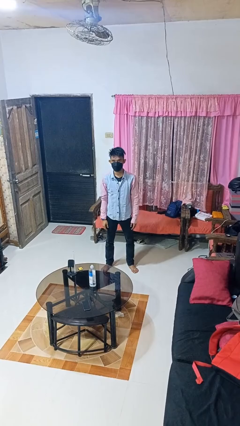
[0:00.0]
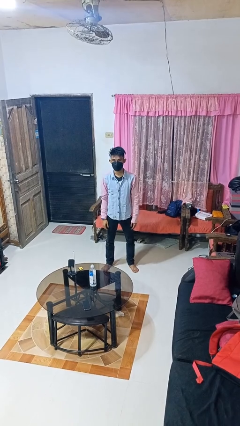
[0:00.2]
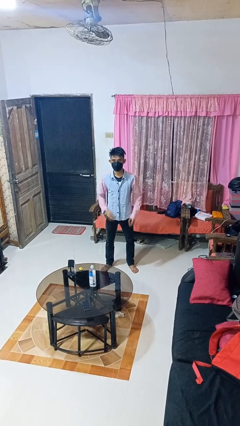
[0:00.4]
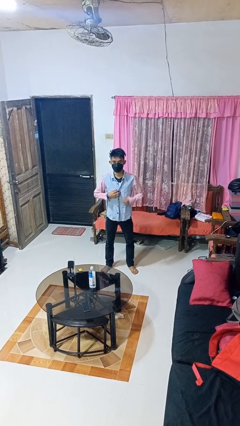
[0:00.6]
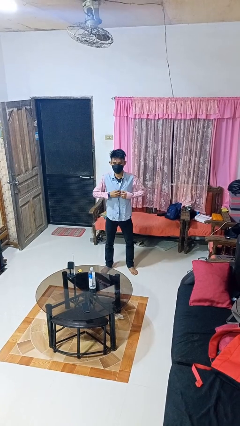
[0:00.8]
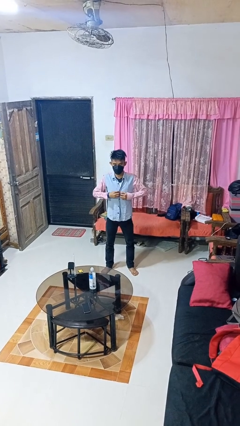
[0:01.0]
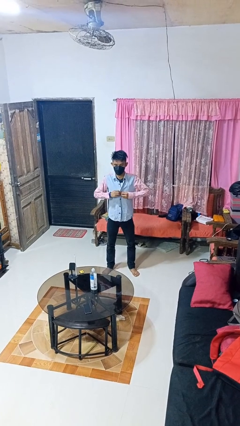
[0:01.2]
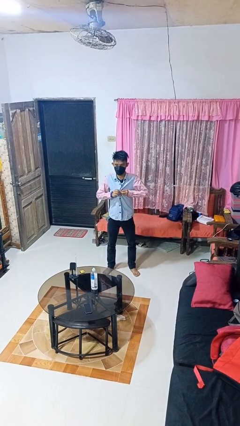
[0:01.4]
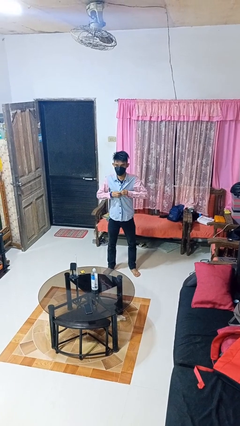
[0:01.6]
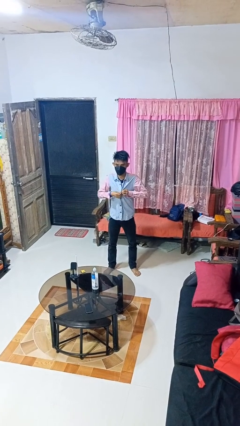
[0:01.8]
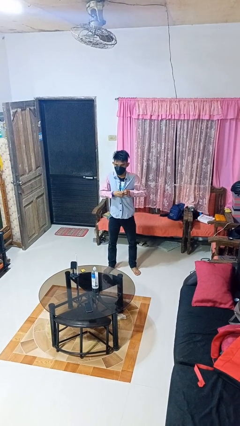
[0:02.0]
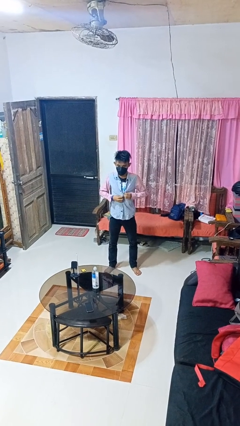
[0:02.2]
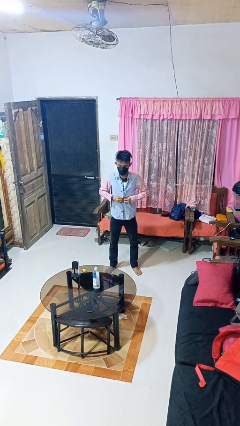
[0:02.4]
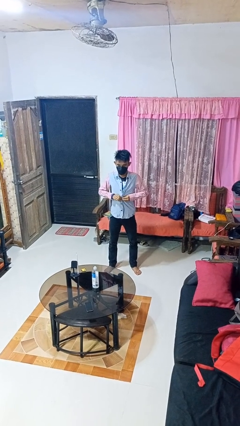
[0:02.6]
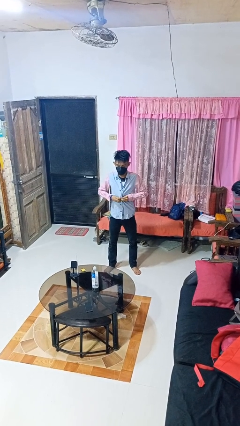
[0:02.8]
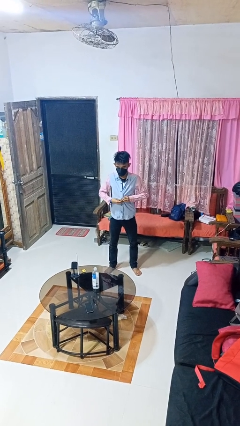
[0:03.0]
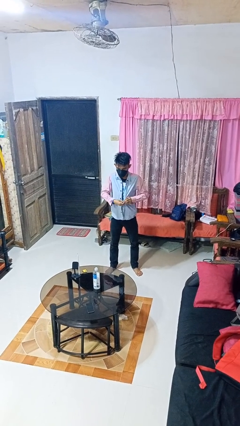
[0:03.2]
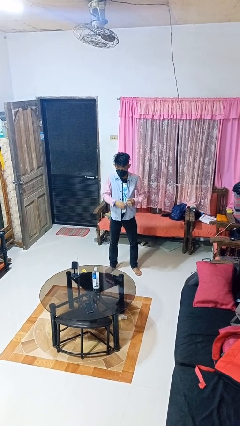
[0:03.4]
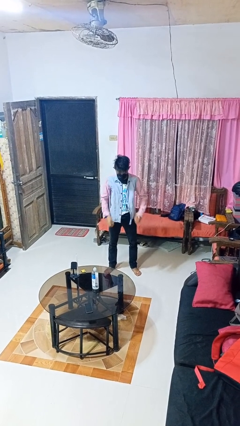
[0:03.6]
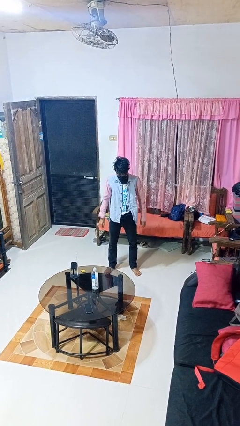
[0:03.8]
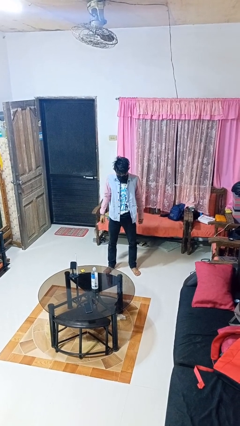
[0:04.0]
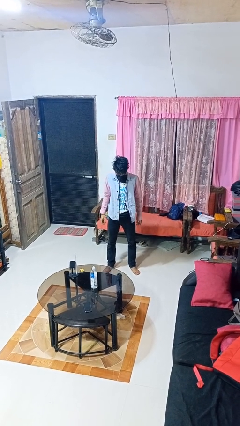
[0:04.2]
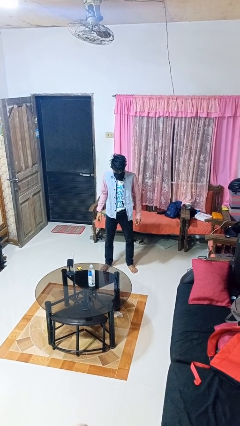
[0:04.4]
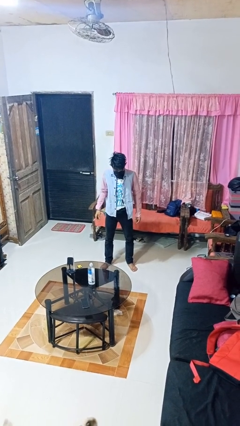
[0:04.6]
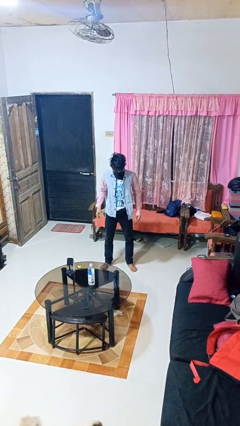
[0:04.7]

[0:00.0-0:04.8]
person unbuttons shirt

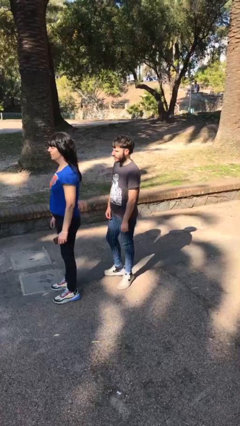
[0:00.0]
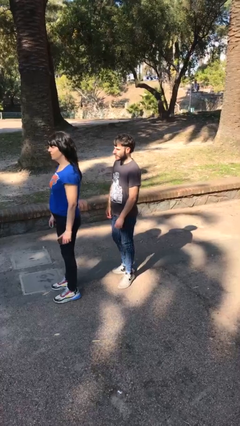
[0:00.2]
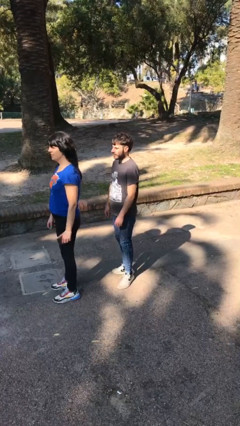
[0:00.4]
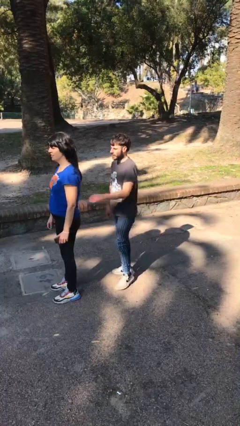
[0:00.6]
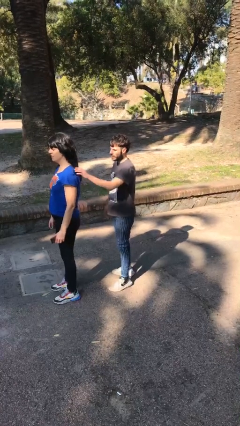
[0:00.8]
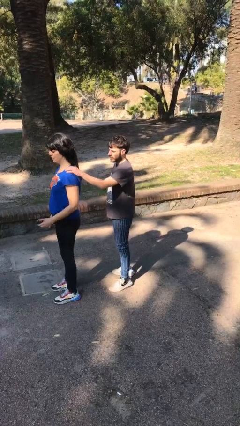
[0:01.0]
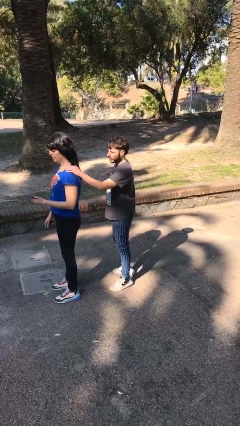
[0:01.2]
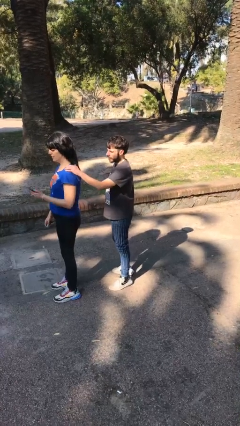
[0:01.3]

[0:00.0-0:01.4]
person grabs person by shoulder

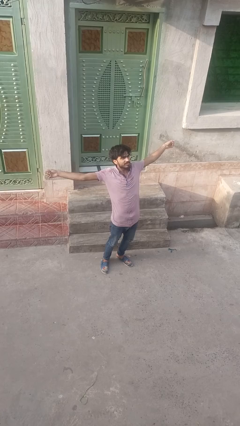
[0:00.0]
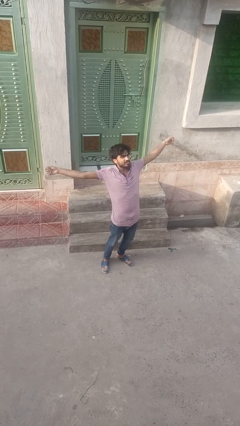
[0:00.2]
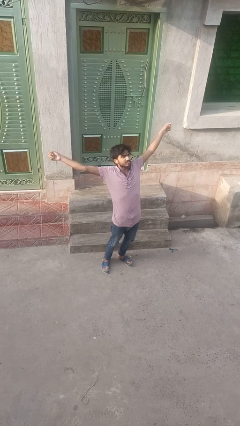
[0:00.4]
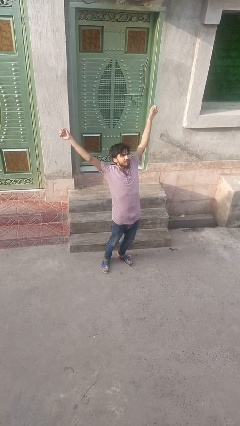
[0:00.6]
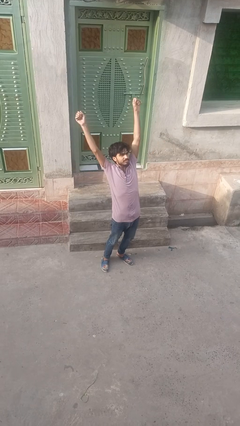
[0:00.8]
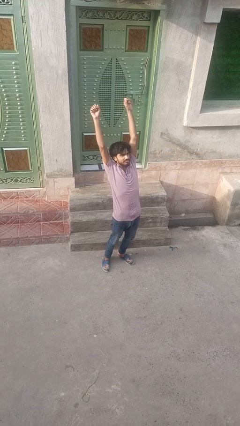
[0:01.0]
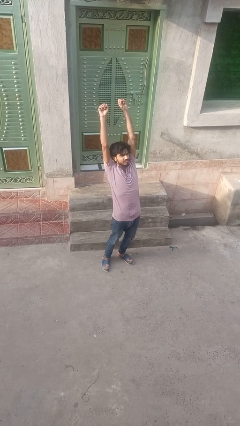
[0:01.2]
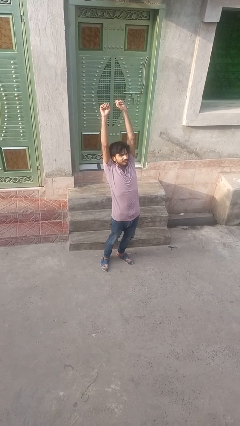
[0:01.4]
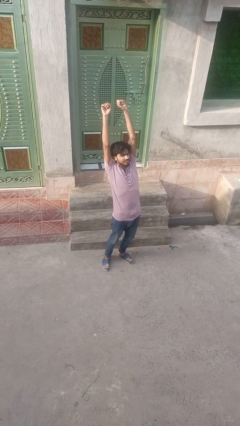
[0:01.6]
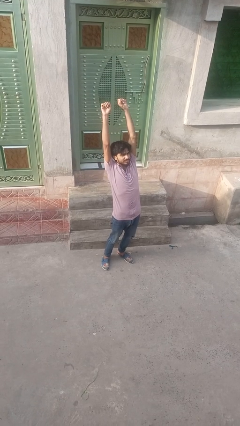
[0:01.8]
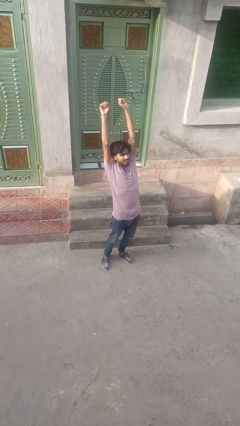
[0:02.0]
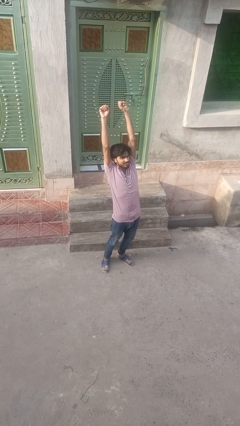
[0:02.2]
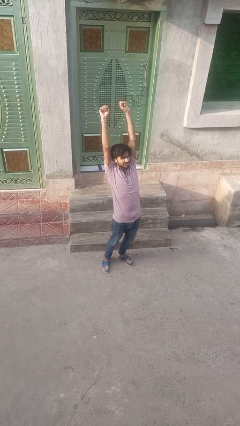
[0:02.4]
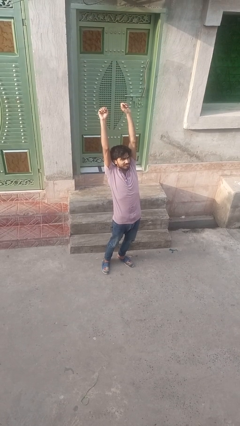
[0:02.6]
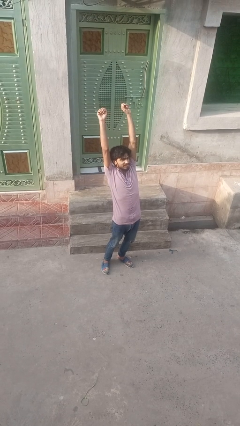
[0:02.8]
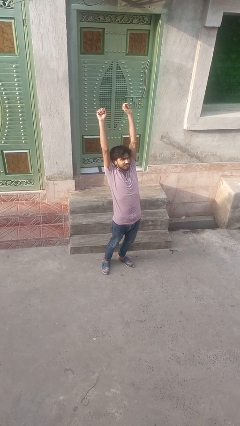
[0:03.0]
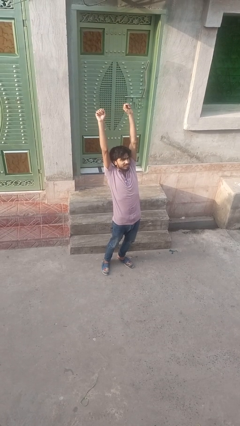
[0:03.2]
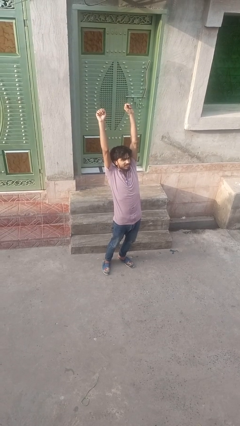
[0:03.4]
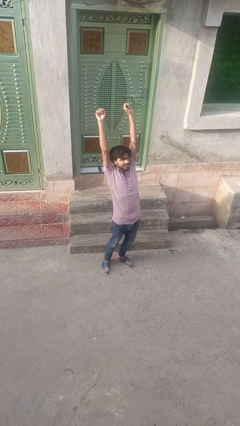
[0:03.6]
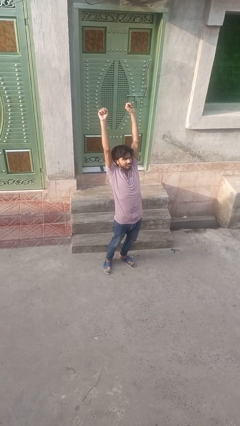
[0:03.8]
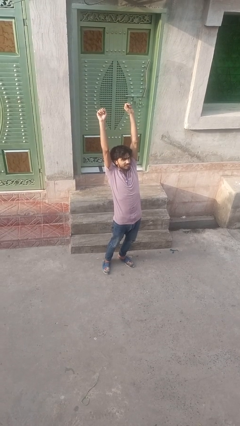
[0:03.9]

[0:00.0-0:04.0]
person stretches arms over head

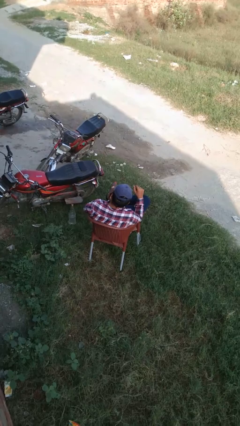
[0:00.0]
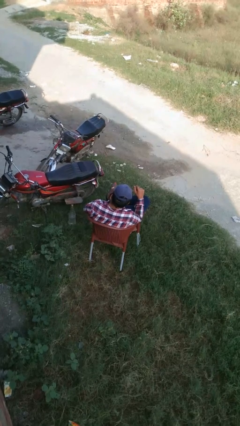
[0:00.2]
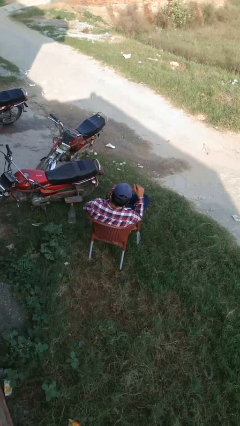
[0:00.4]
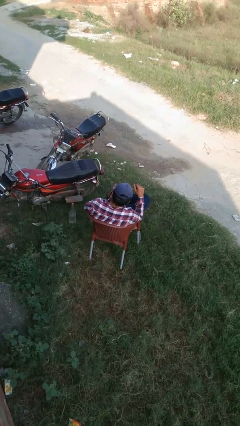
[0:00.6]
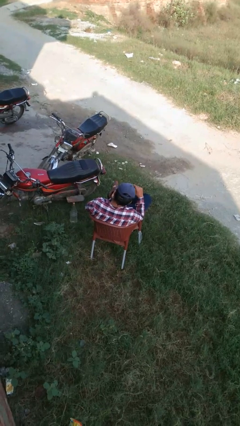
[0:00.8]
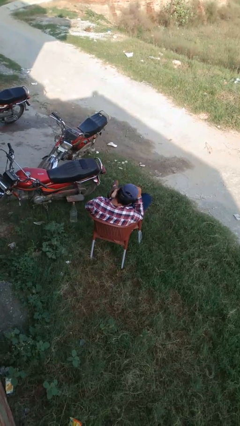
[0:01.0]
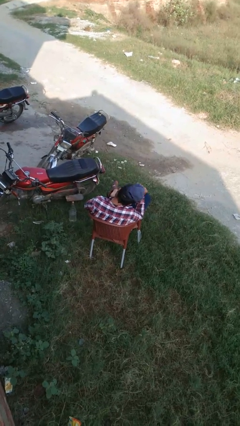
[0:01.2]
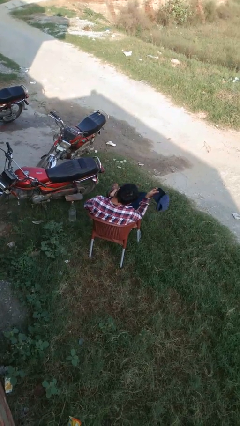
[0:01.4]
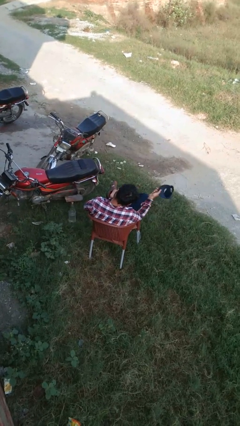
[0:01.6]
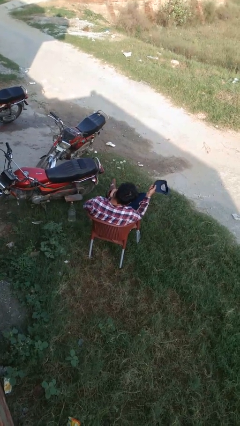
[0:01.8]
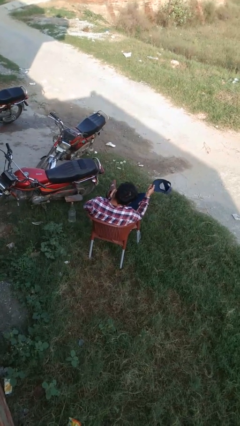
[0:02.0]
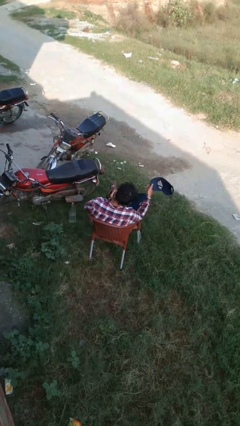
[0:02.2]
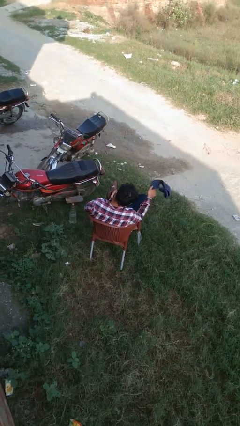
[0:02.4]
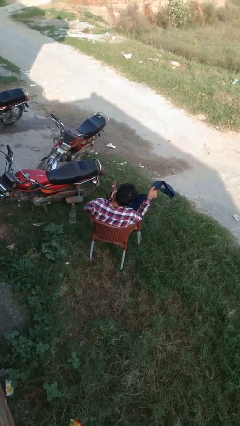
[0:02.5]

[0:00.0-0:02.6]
person takes off hat

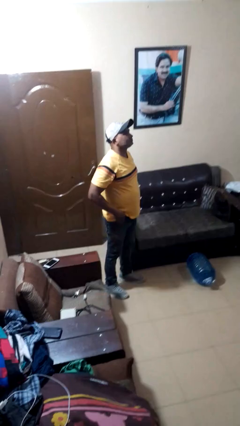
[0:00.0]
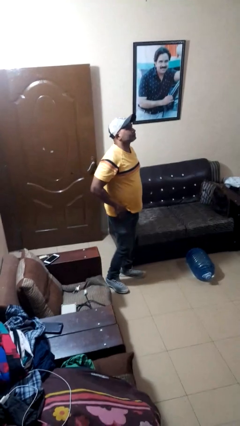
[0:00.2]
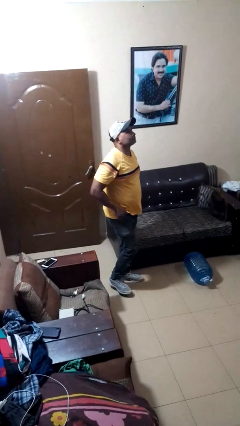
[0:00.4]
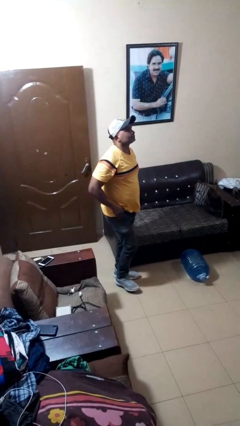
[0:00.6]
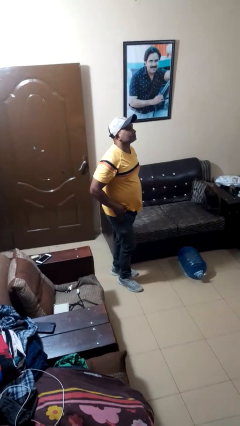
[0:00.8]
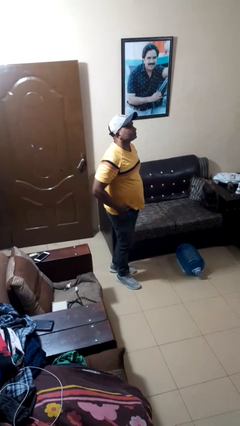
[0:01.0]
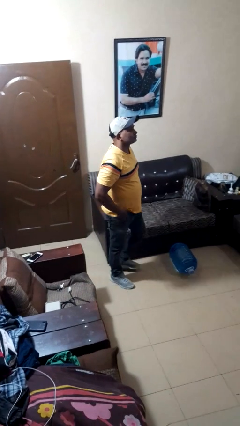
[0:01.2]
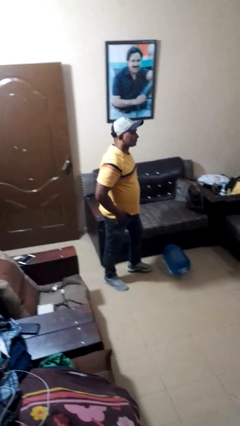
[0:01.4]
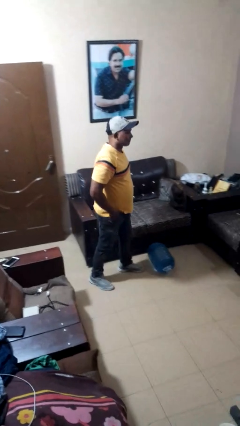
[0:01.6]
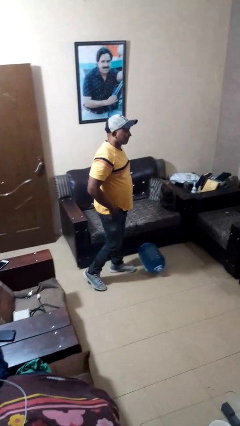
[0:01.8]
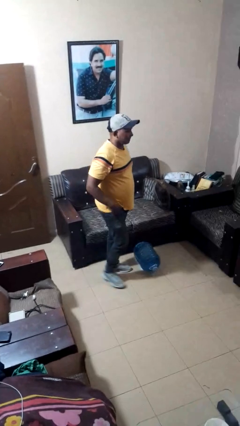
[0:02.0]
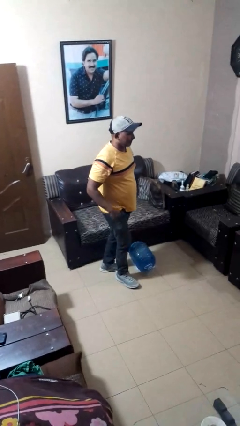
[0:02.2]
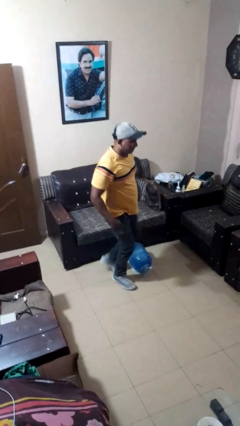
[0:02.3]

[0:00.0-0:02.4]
person trips on object on floor

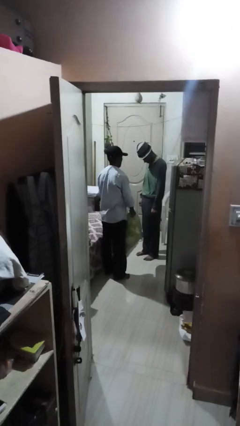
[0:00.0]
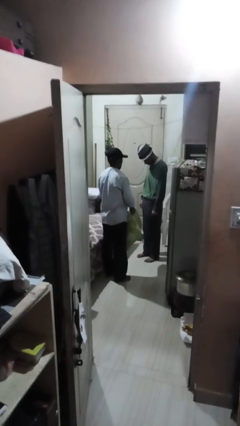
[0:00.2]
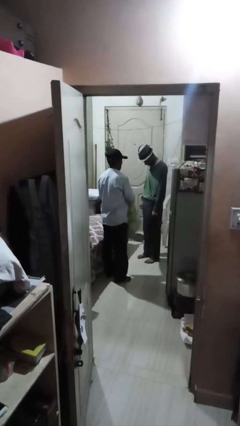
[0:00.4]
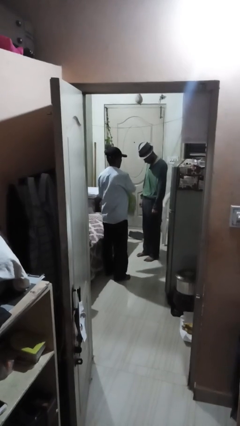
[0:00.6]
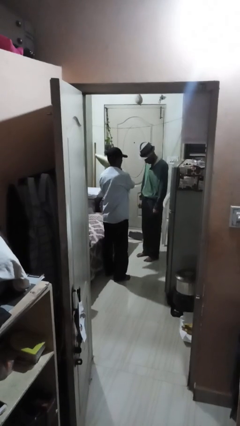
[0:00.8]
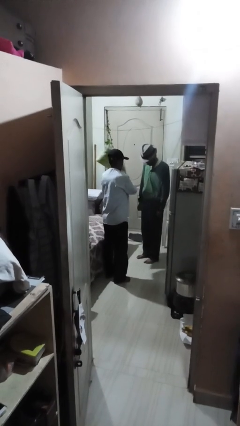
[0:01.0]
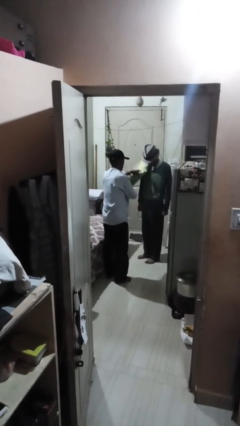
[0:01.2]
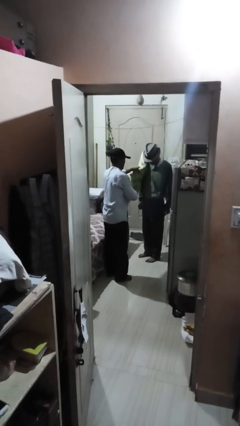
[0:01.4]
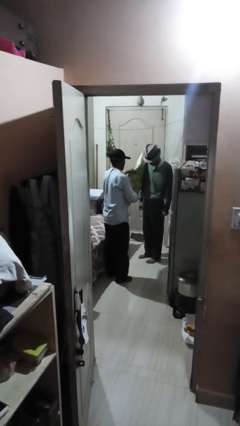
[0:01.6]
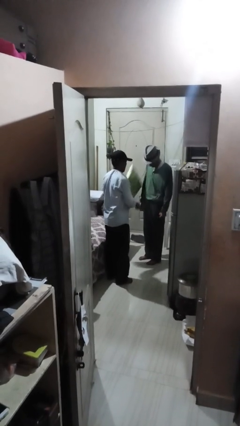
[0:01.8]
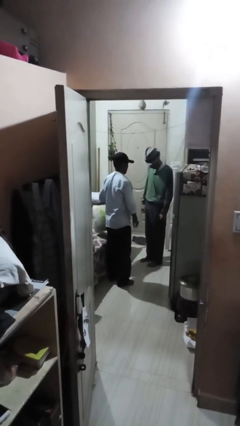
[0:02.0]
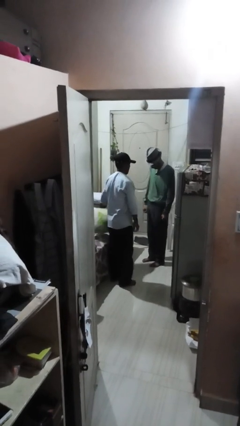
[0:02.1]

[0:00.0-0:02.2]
person hits person with pillow
